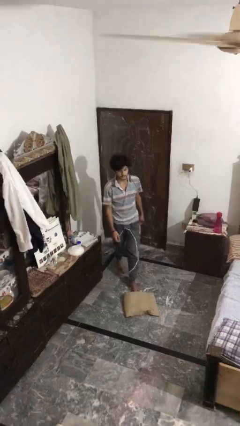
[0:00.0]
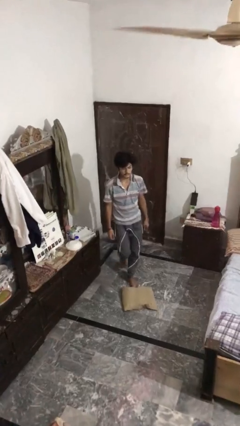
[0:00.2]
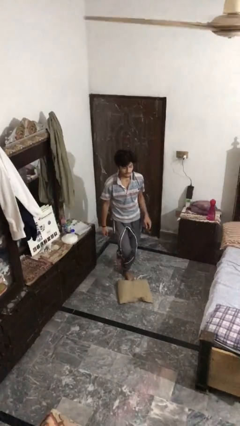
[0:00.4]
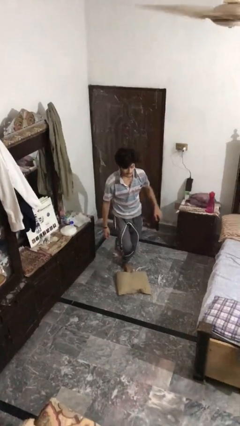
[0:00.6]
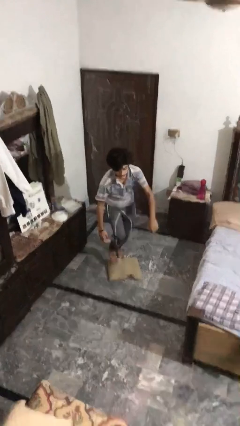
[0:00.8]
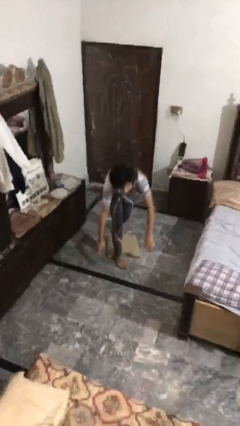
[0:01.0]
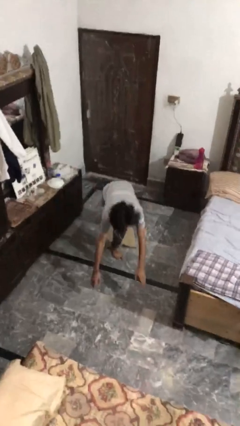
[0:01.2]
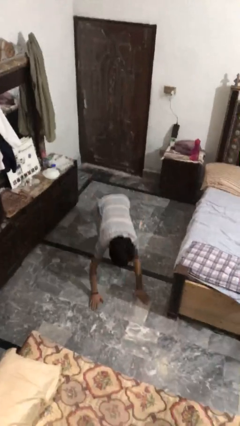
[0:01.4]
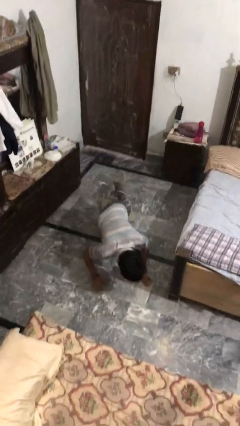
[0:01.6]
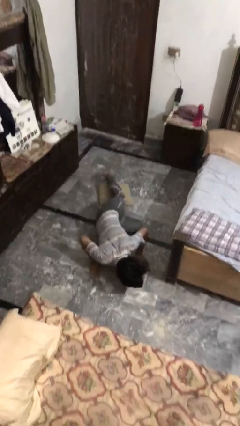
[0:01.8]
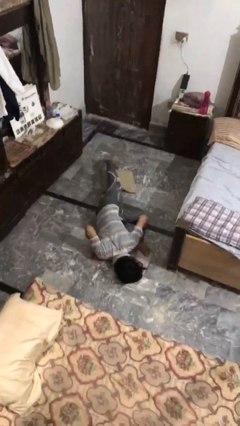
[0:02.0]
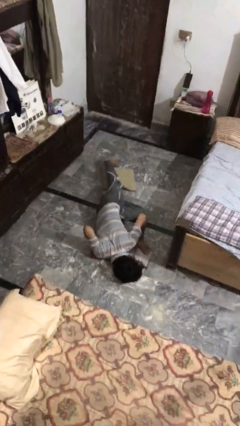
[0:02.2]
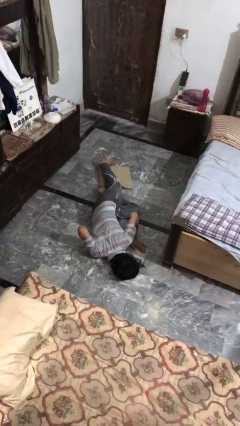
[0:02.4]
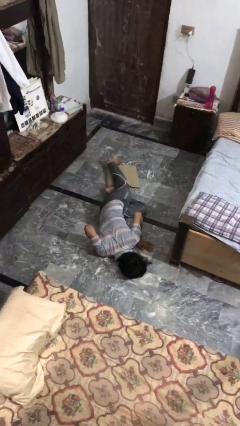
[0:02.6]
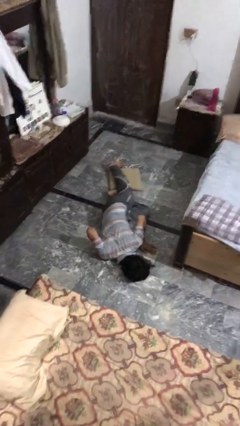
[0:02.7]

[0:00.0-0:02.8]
person trips on object on floor

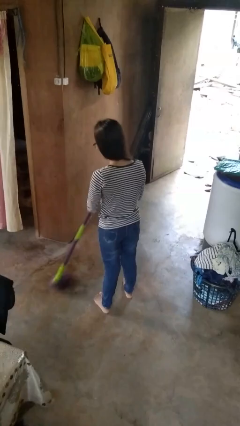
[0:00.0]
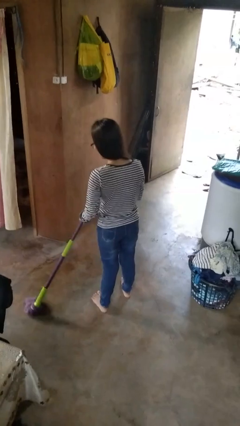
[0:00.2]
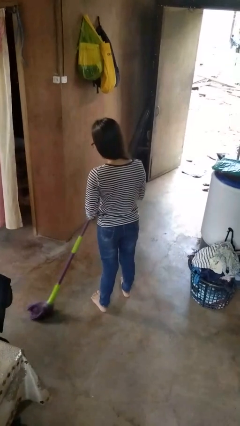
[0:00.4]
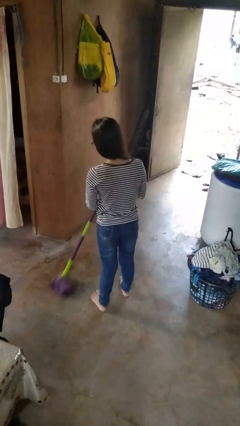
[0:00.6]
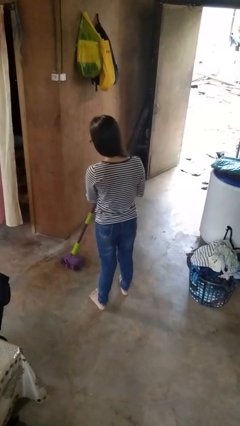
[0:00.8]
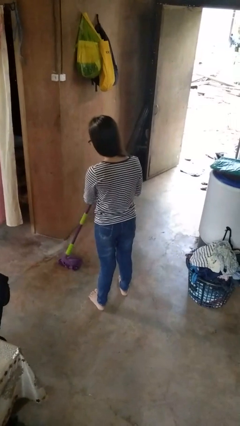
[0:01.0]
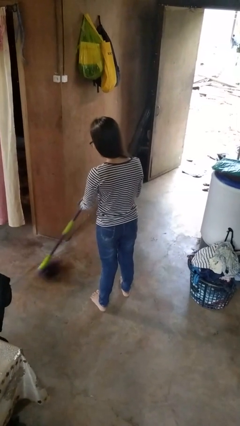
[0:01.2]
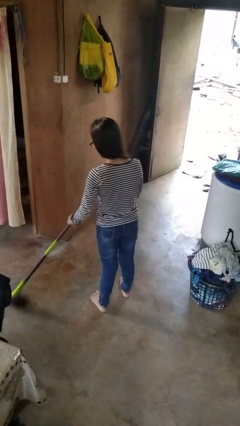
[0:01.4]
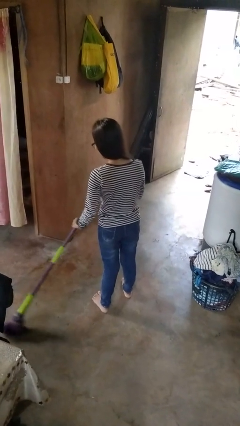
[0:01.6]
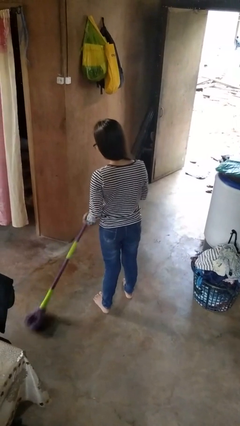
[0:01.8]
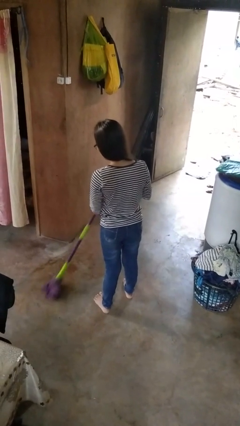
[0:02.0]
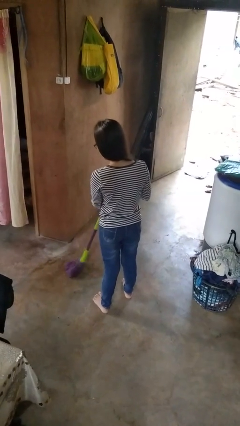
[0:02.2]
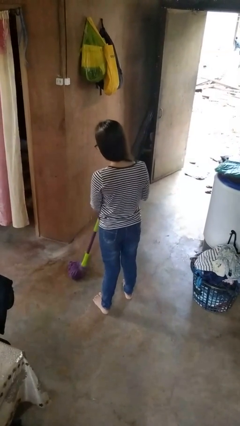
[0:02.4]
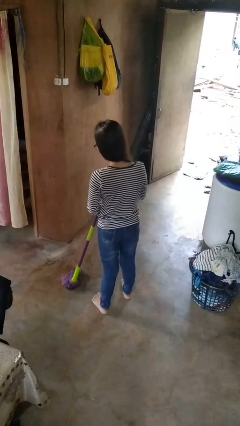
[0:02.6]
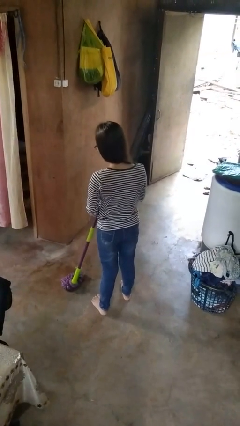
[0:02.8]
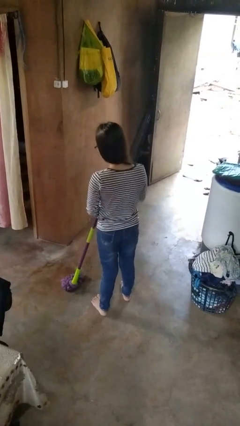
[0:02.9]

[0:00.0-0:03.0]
person mops

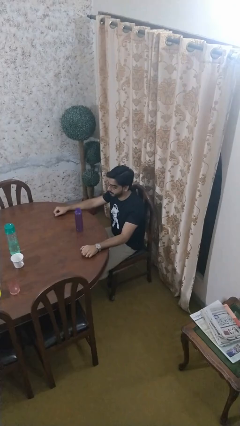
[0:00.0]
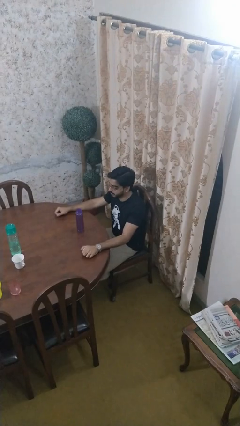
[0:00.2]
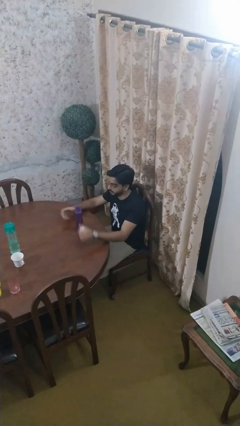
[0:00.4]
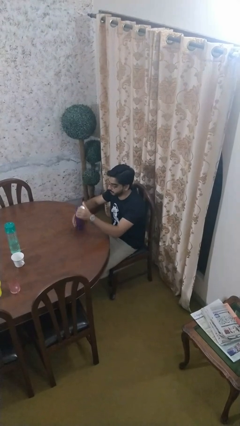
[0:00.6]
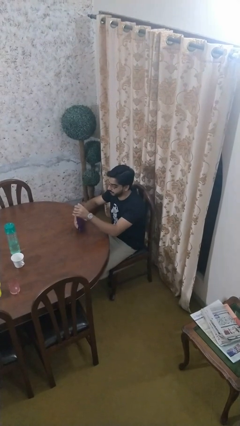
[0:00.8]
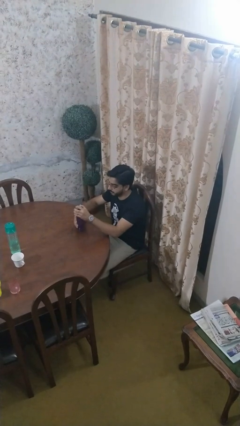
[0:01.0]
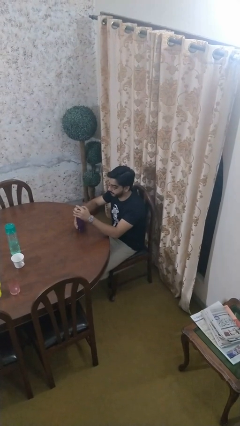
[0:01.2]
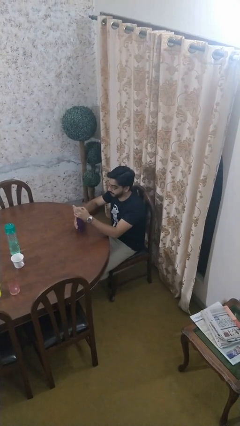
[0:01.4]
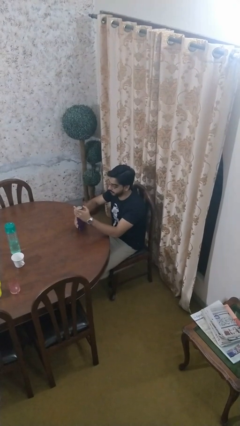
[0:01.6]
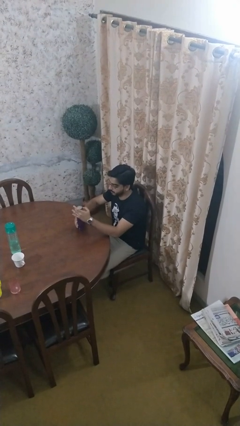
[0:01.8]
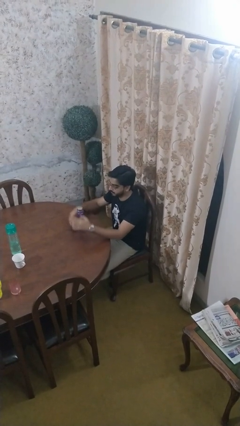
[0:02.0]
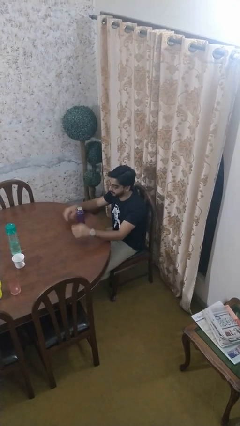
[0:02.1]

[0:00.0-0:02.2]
person screws lid to bottle

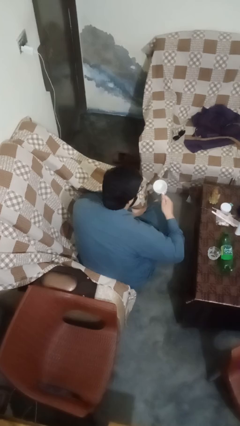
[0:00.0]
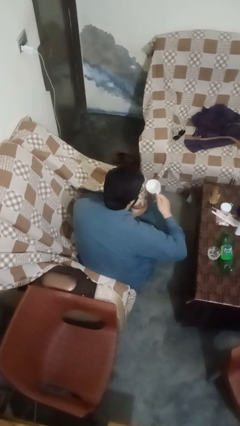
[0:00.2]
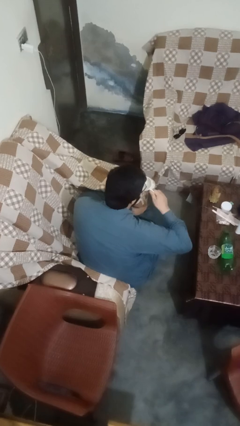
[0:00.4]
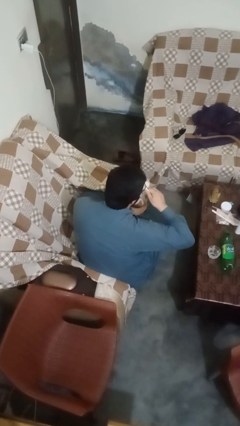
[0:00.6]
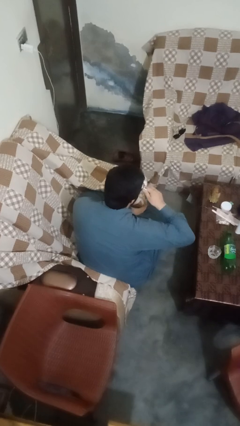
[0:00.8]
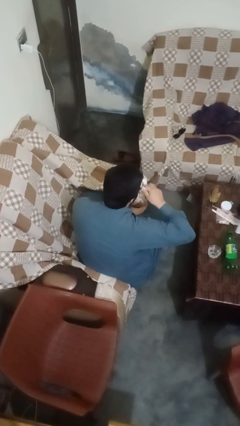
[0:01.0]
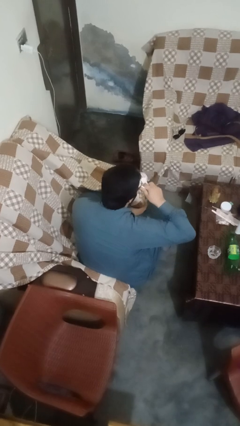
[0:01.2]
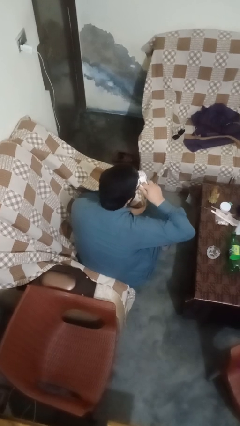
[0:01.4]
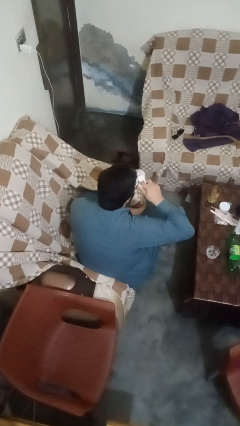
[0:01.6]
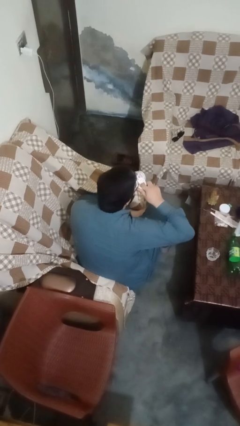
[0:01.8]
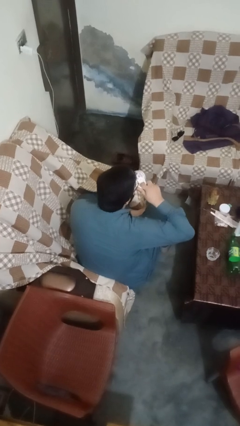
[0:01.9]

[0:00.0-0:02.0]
person drinks from mug

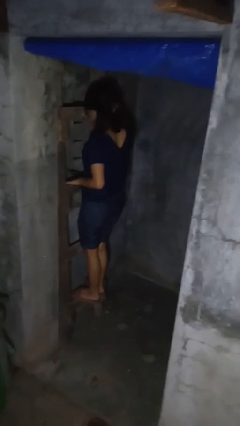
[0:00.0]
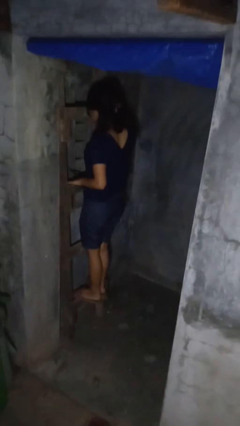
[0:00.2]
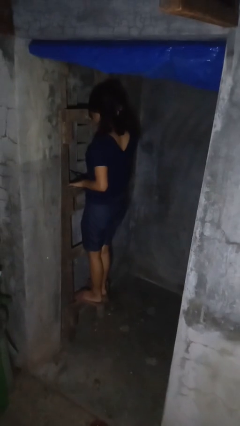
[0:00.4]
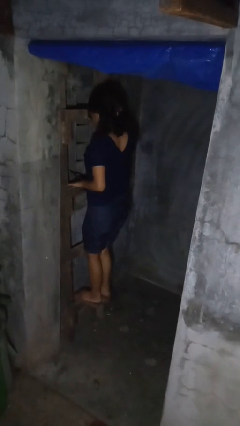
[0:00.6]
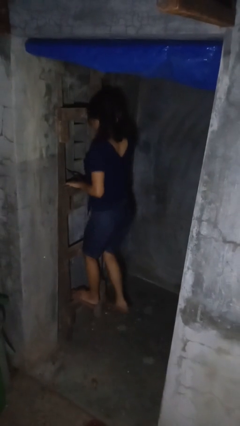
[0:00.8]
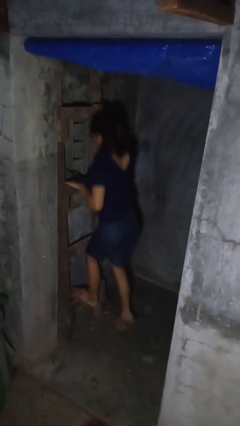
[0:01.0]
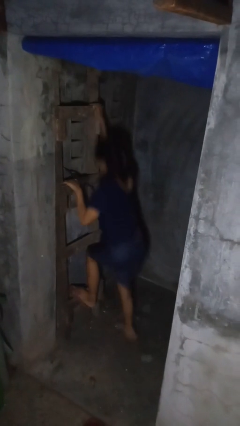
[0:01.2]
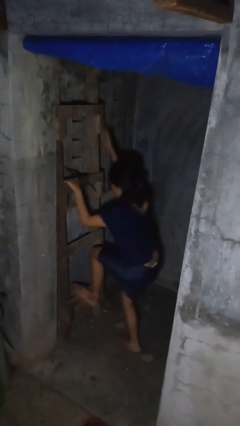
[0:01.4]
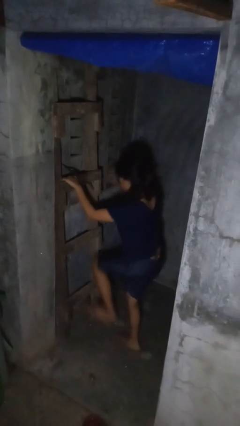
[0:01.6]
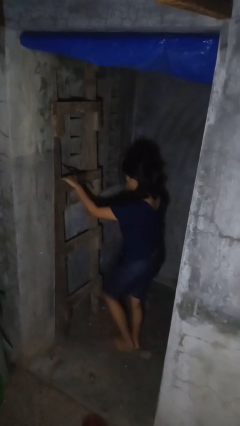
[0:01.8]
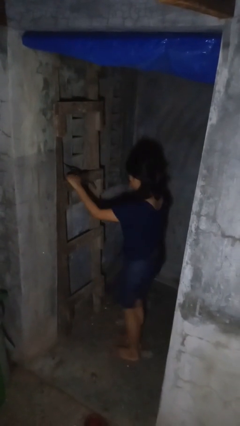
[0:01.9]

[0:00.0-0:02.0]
person climbs down ladder

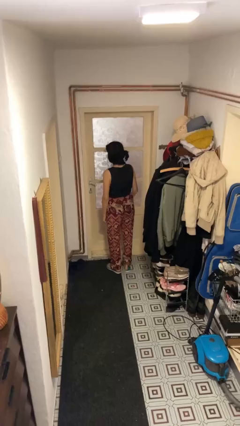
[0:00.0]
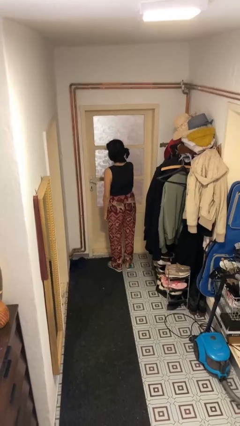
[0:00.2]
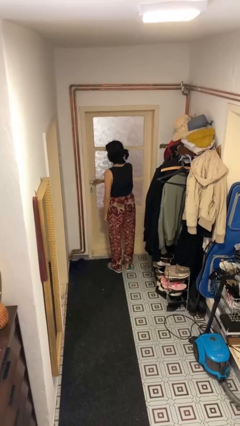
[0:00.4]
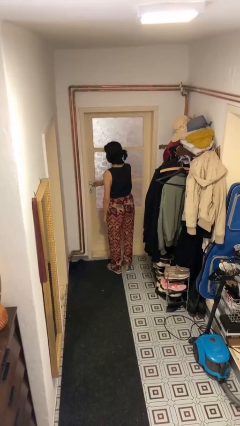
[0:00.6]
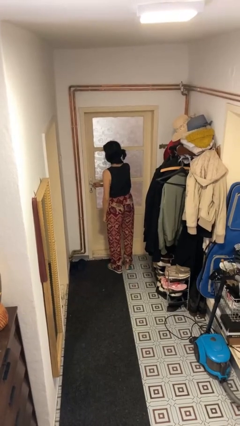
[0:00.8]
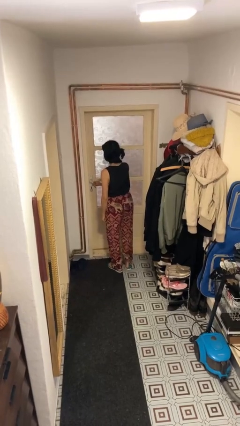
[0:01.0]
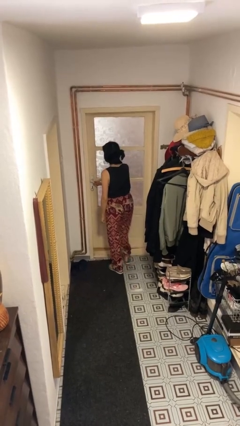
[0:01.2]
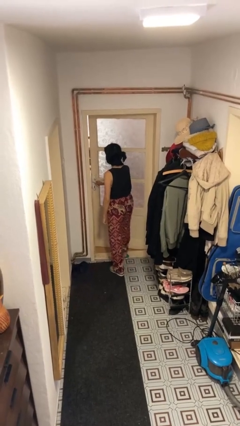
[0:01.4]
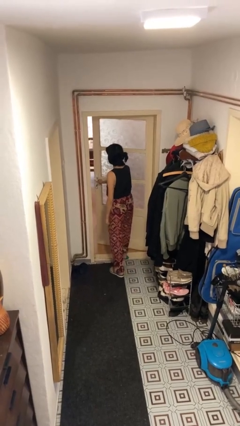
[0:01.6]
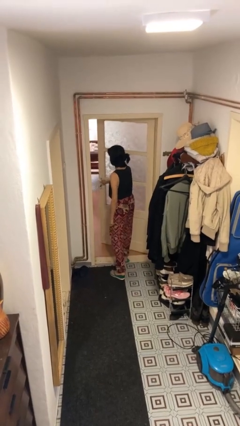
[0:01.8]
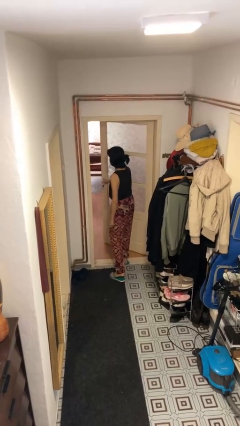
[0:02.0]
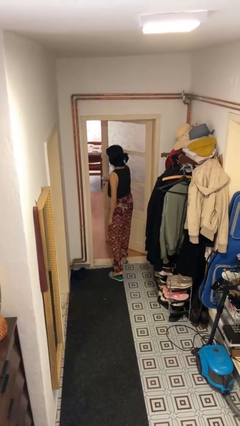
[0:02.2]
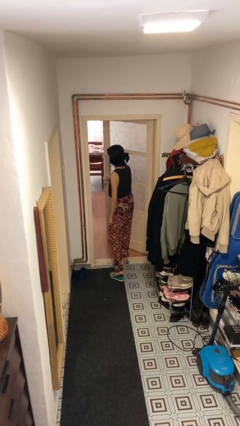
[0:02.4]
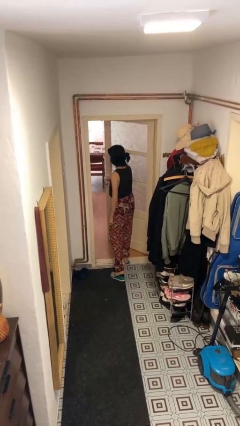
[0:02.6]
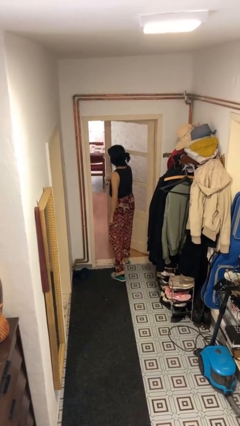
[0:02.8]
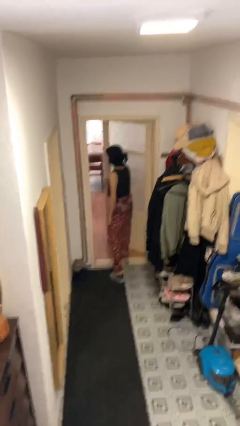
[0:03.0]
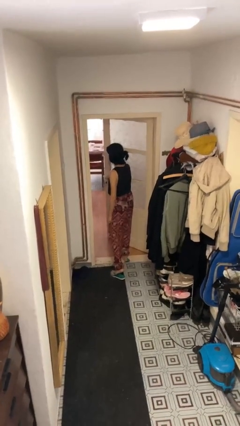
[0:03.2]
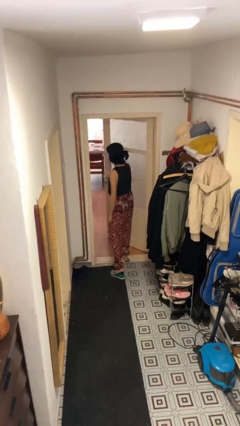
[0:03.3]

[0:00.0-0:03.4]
person opens facility door

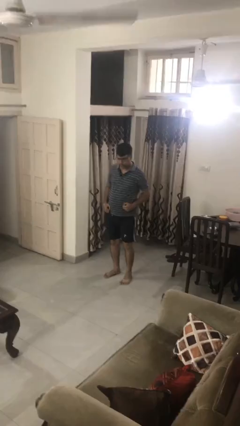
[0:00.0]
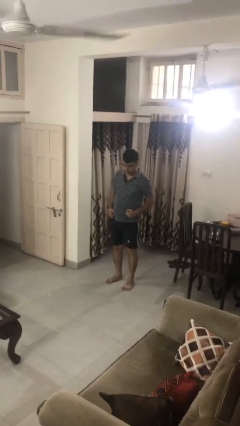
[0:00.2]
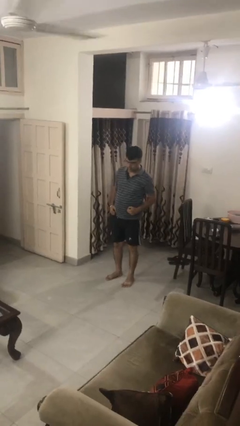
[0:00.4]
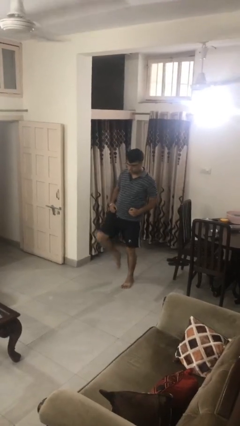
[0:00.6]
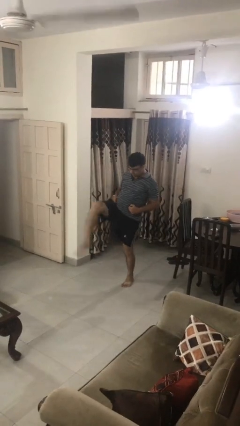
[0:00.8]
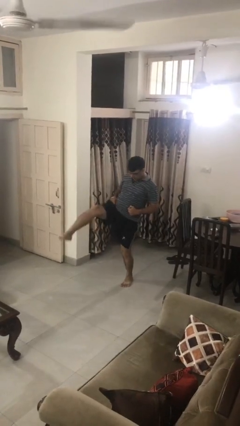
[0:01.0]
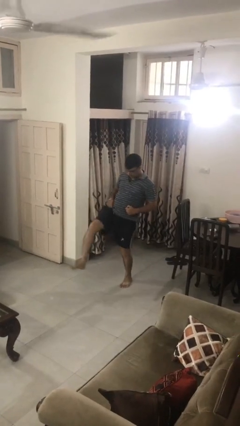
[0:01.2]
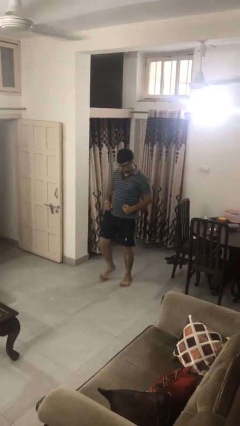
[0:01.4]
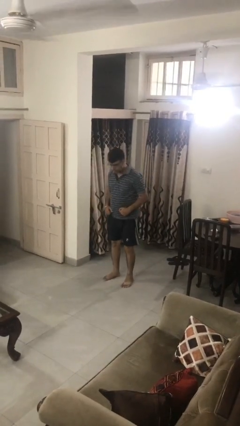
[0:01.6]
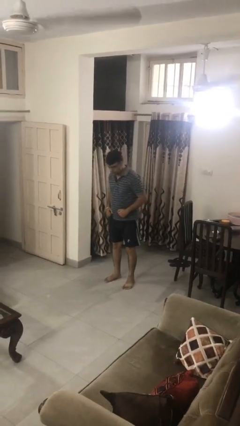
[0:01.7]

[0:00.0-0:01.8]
person karate kicks
